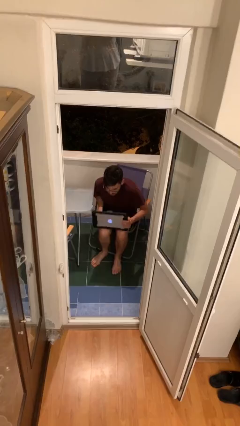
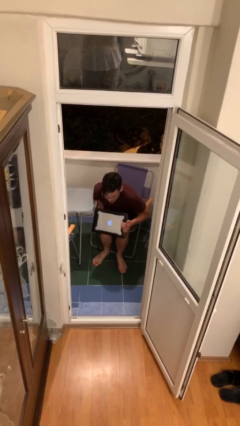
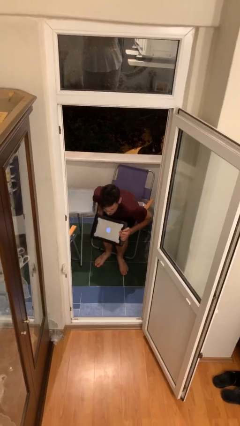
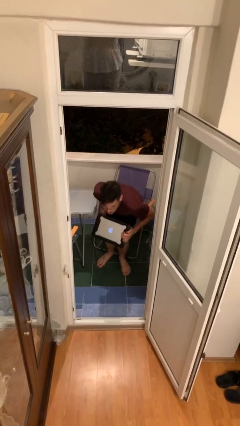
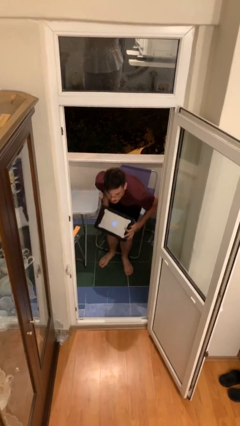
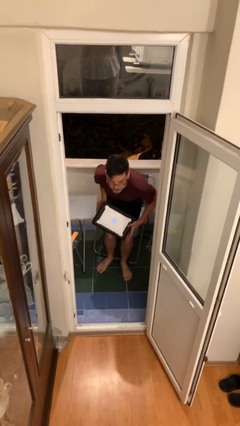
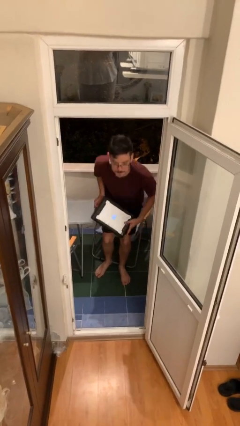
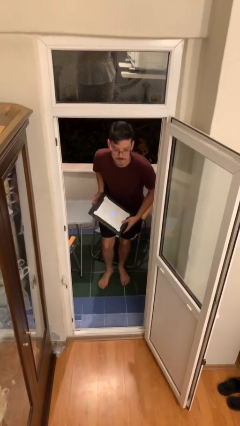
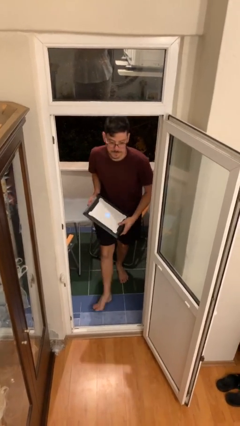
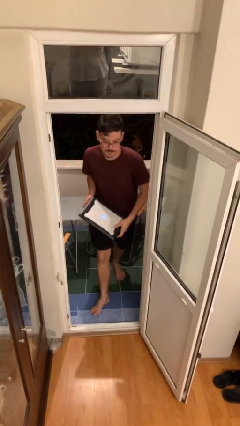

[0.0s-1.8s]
person stands up

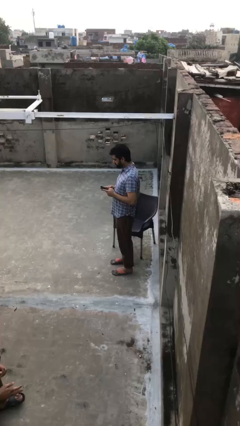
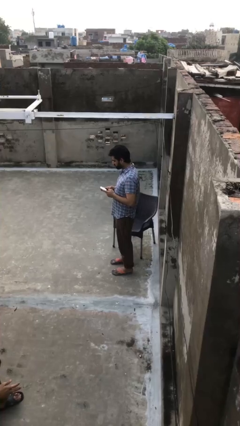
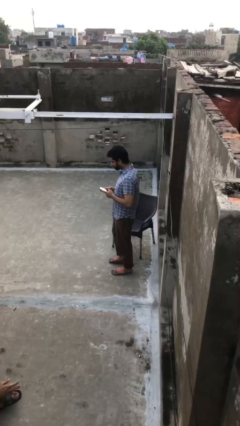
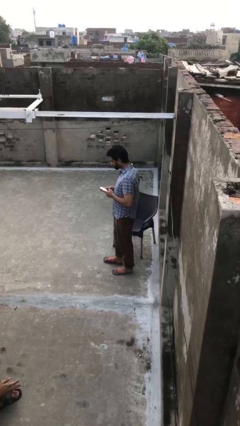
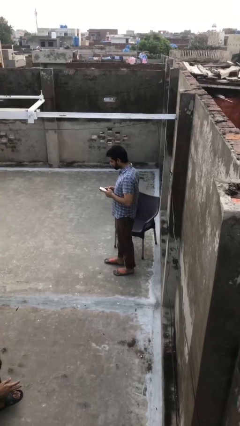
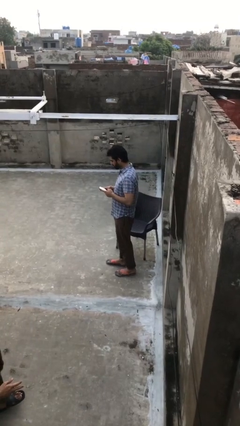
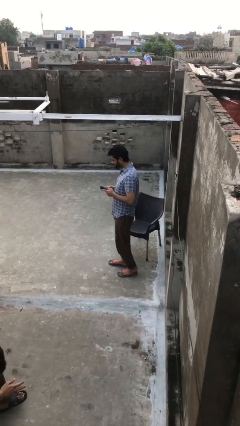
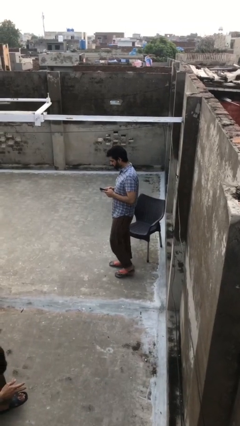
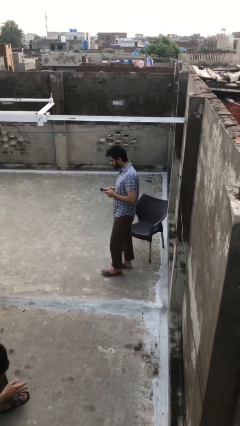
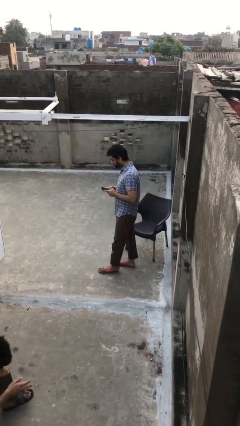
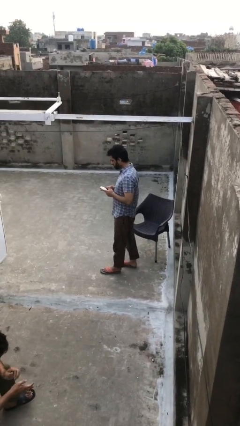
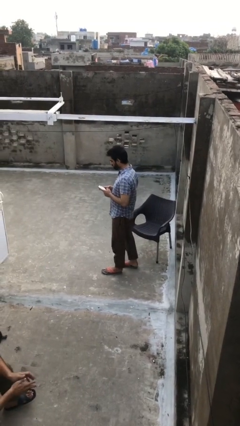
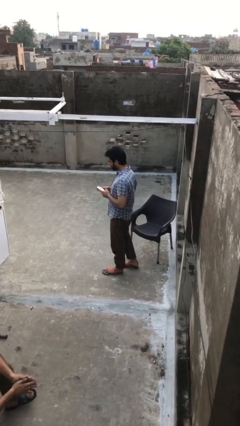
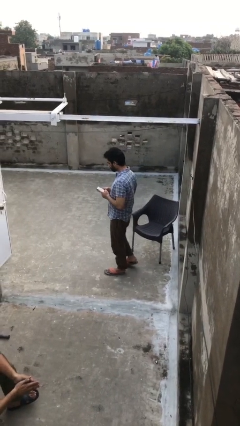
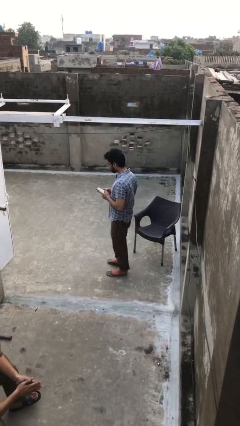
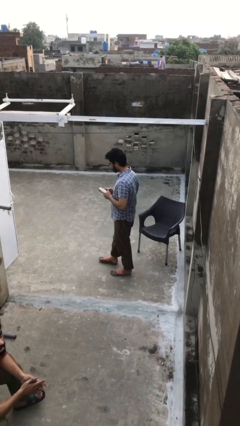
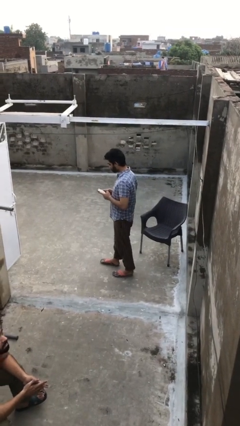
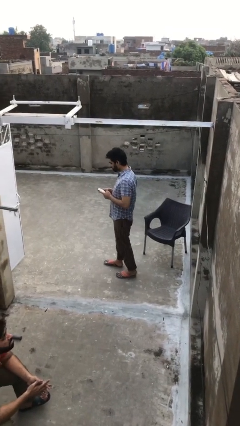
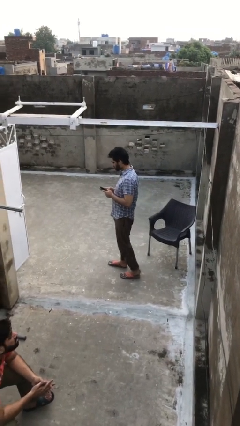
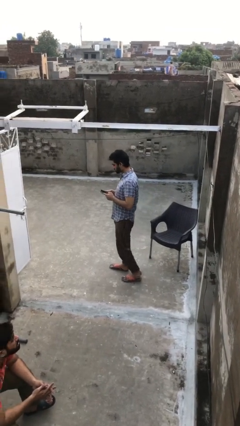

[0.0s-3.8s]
person texts on phone

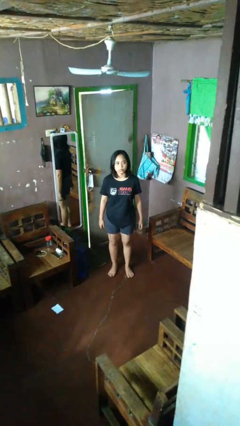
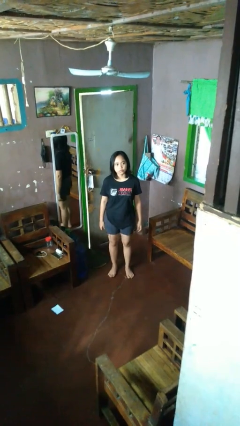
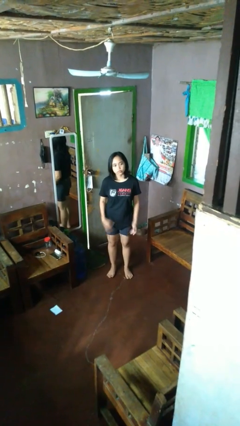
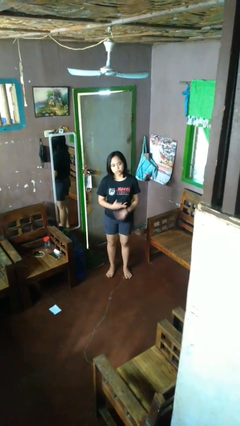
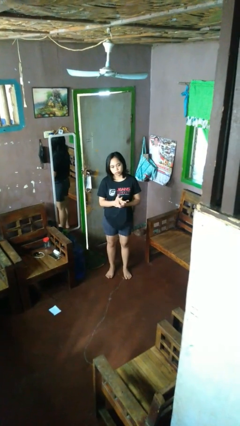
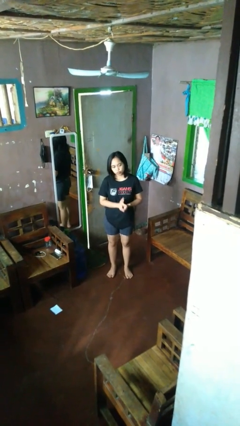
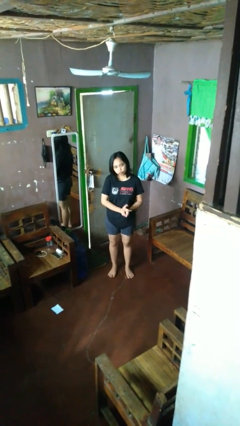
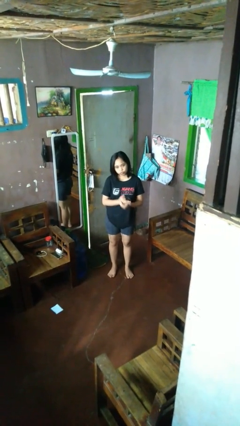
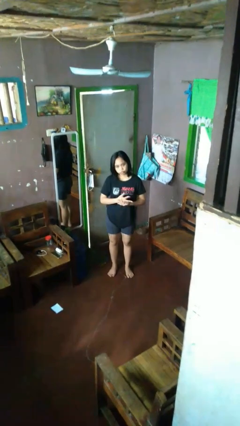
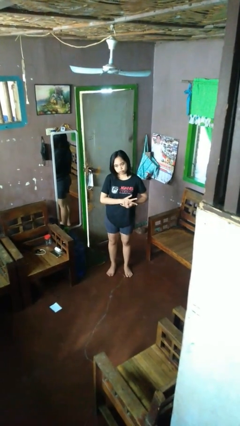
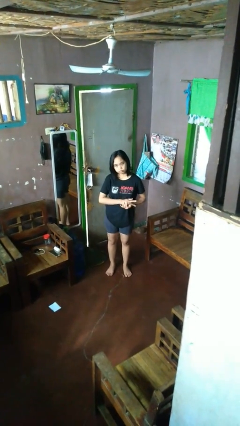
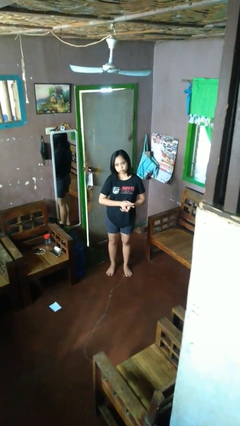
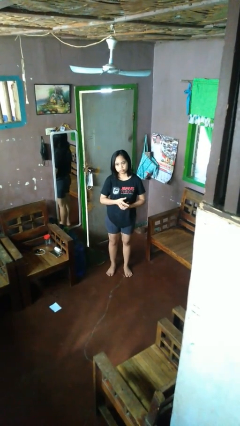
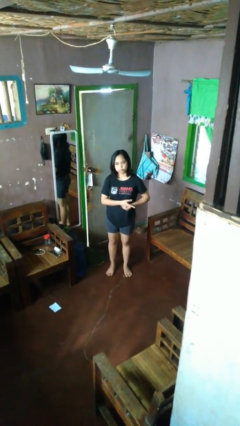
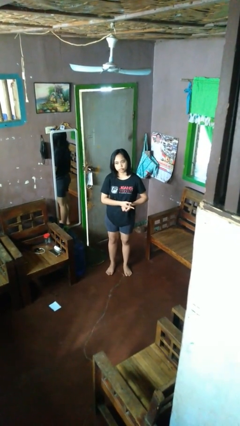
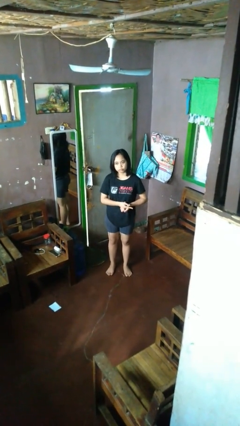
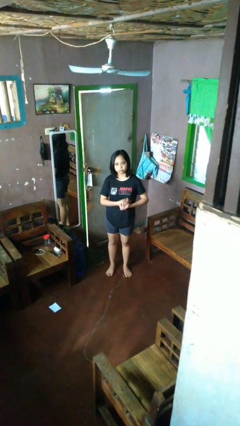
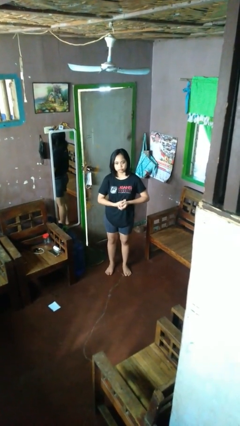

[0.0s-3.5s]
person cracks knuckles

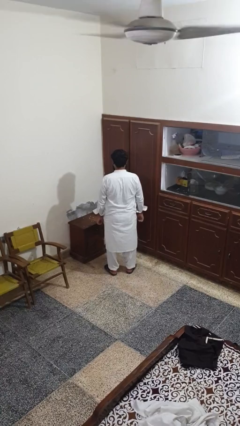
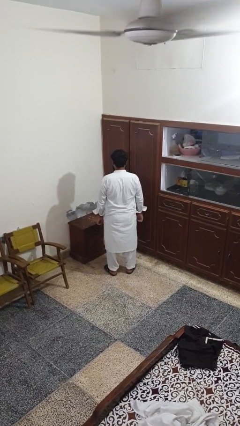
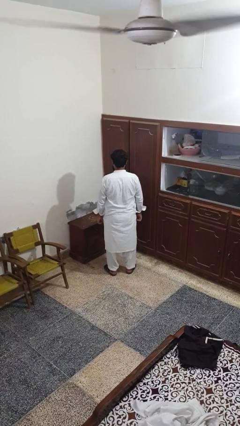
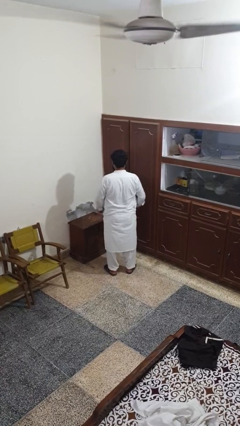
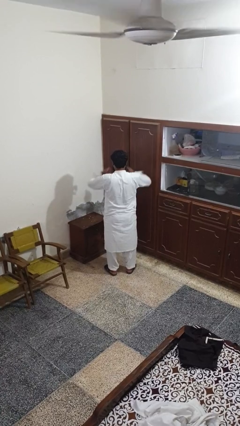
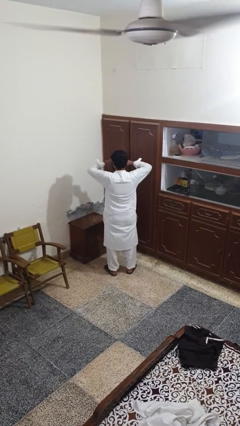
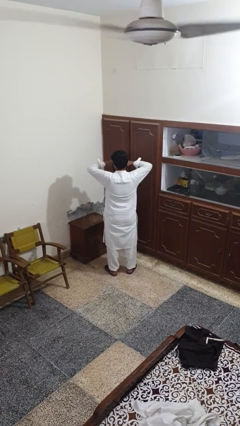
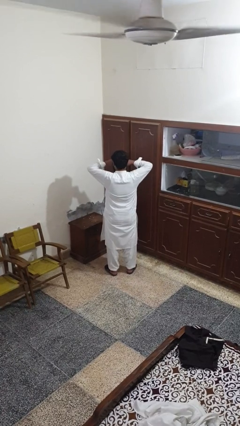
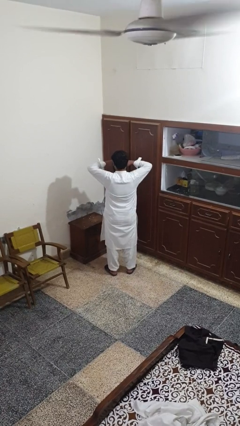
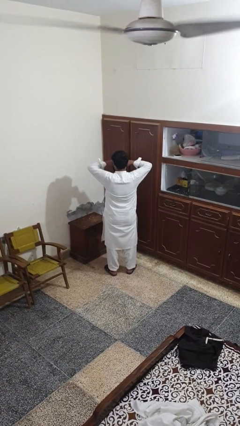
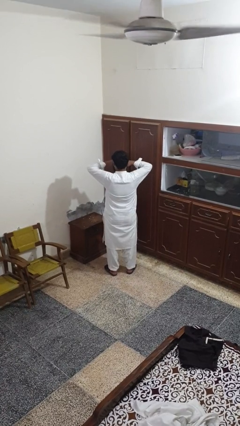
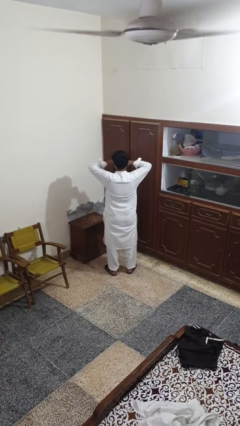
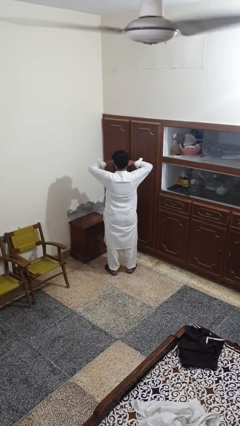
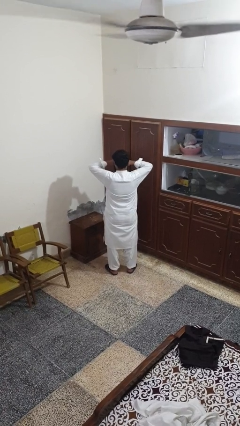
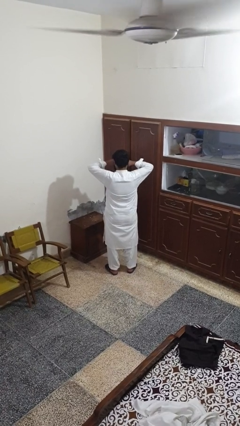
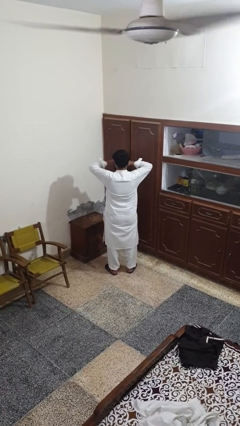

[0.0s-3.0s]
person rubs eyes

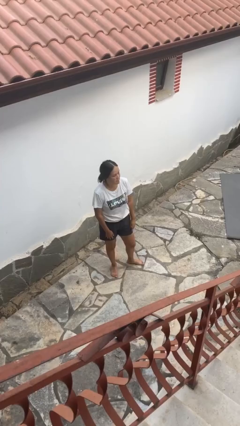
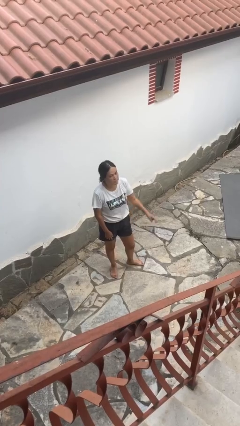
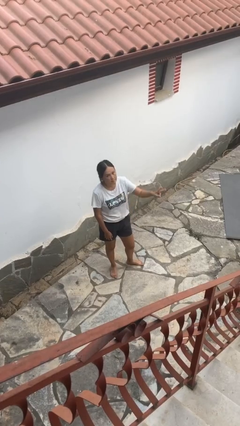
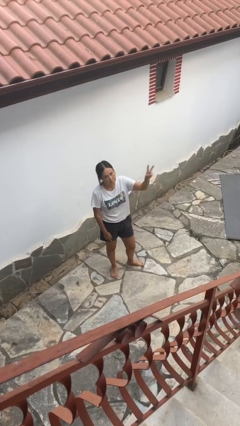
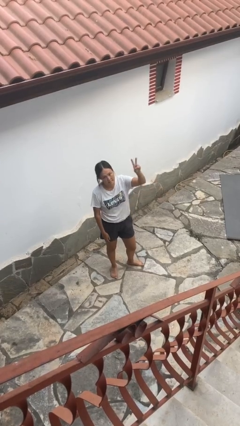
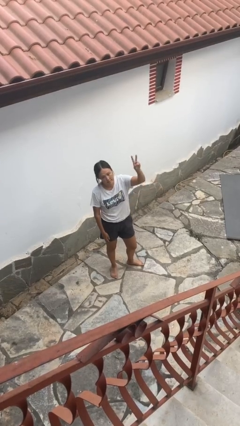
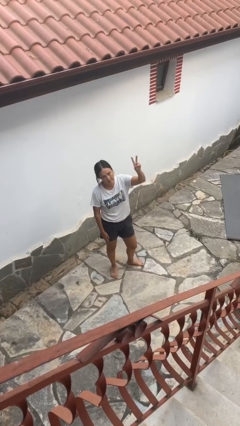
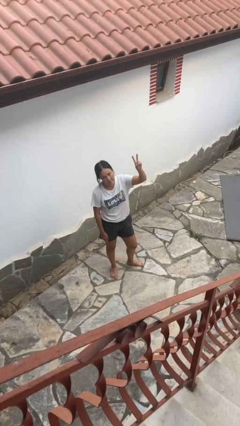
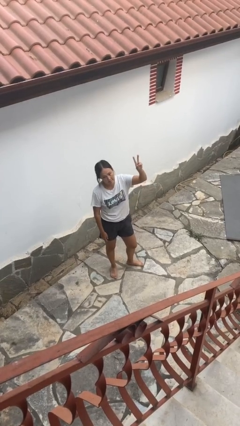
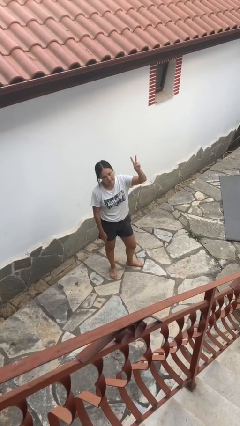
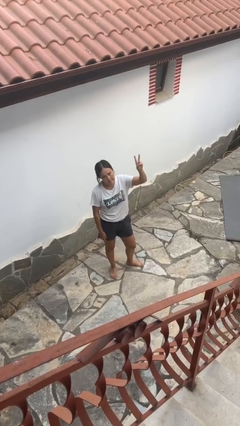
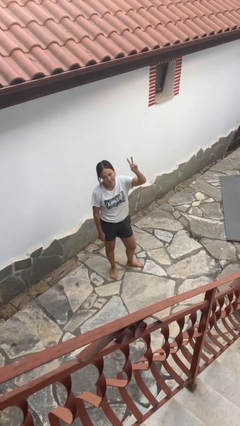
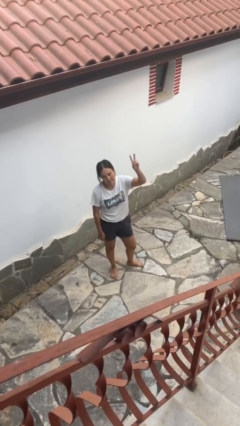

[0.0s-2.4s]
person gestures peace

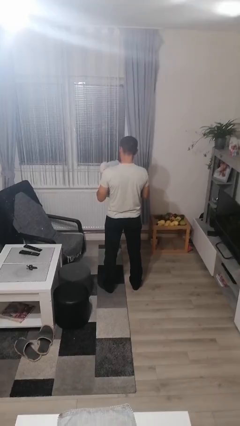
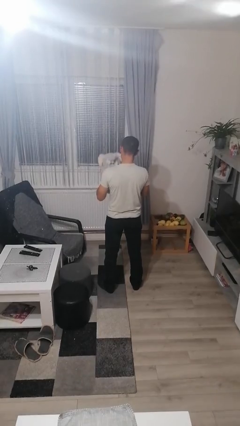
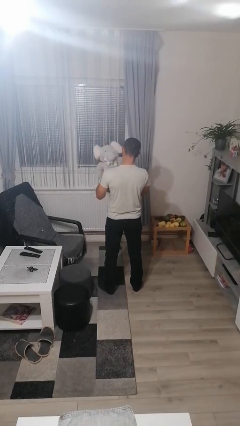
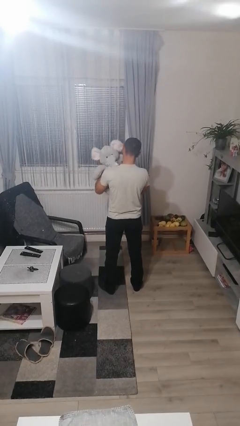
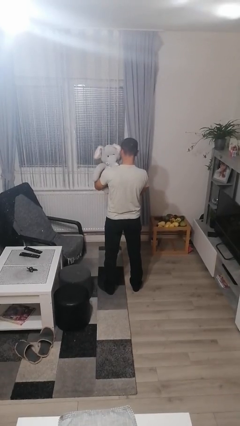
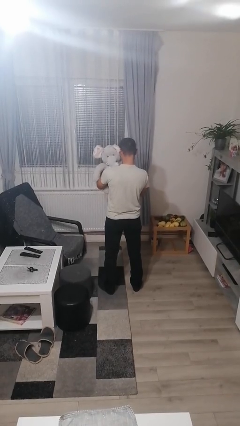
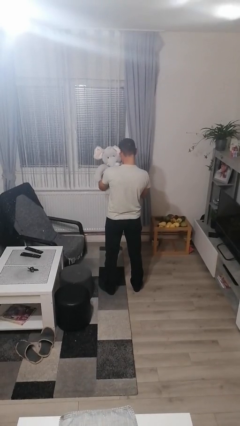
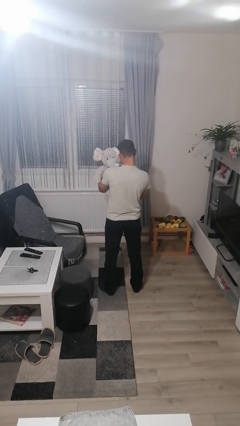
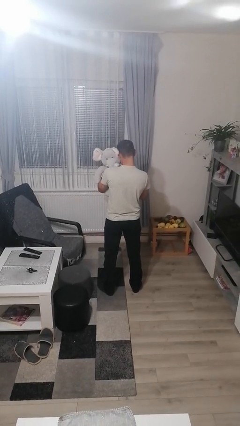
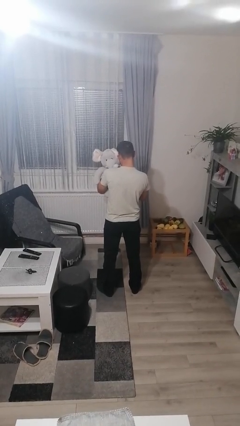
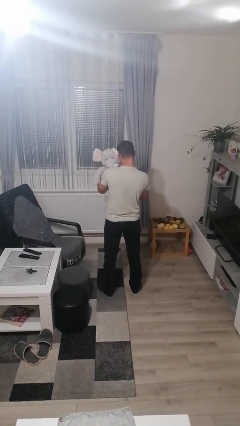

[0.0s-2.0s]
person hugs stuffed animal

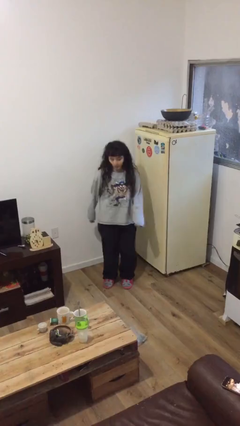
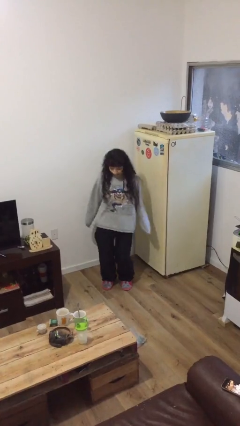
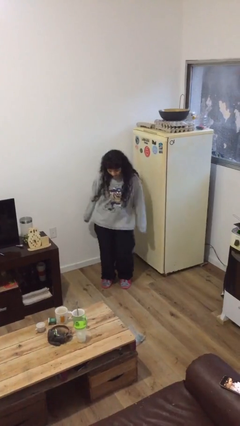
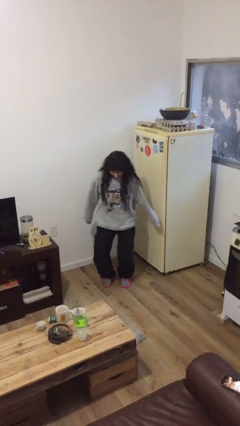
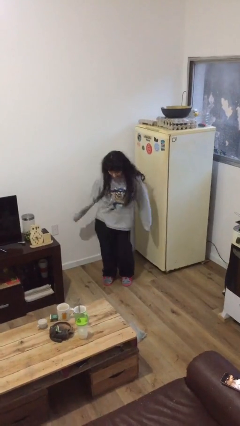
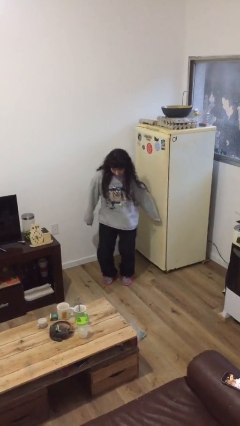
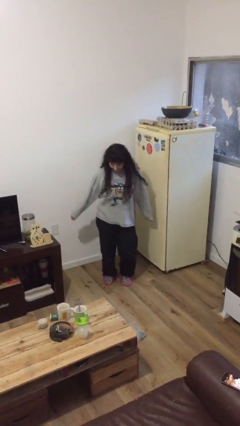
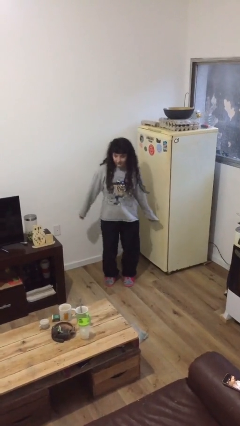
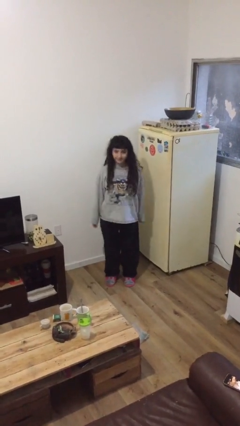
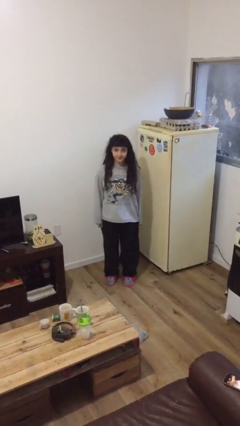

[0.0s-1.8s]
person wiggles hips
